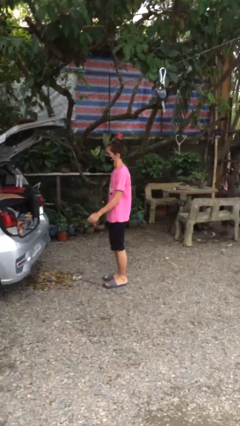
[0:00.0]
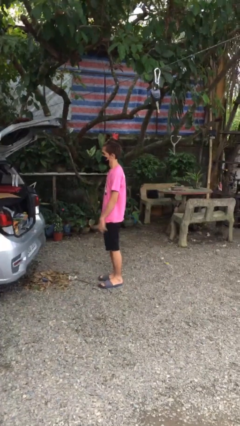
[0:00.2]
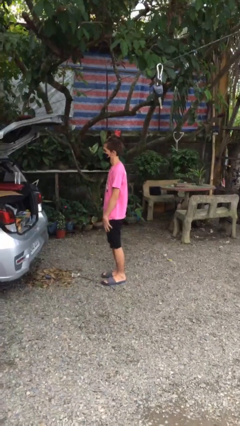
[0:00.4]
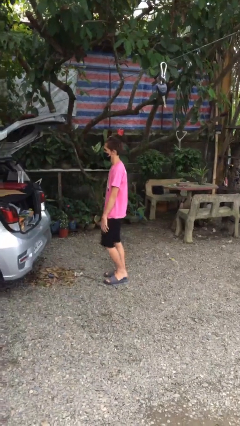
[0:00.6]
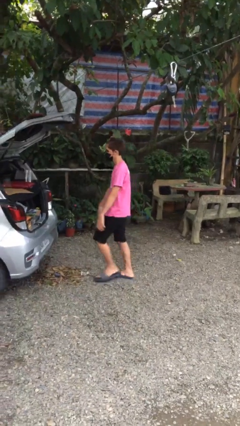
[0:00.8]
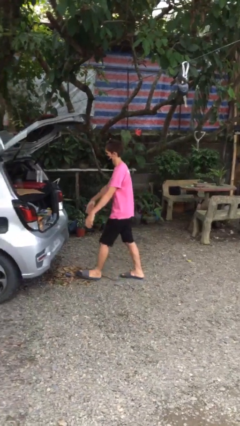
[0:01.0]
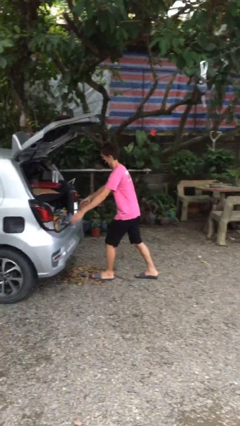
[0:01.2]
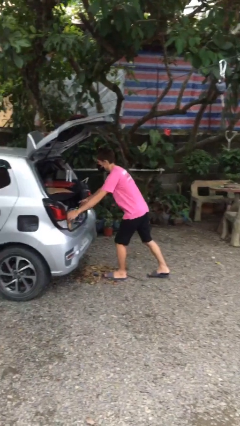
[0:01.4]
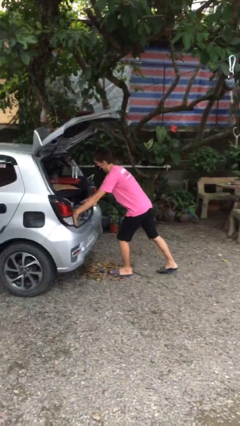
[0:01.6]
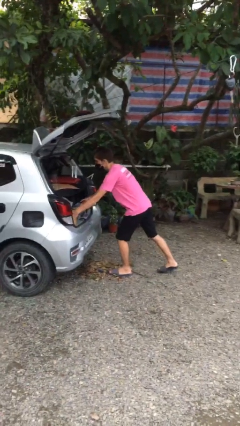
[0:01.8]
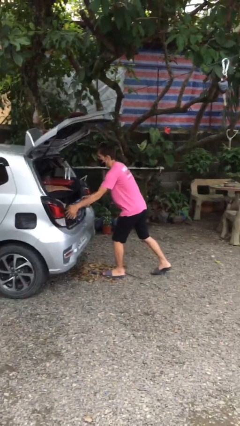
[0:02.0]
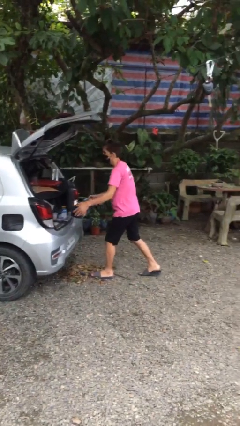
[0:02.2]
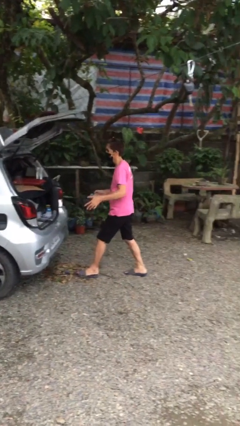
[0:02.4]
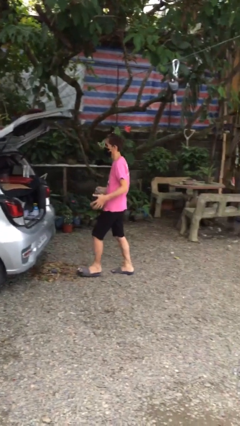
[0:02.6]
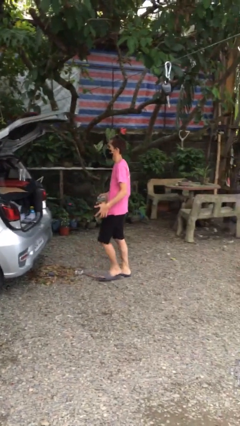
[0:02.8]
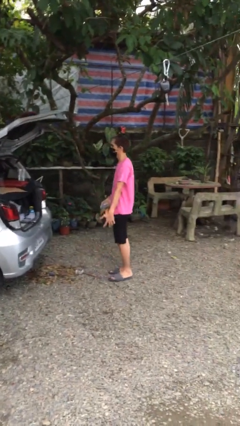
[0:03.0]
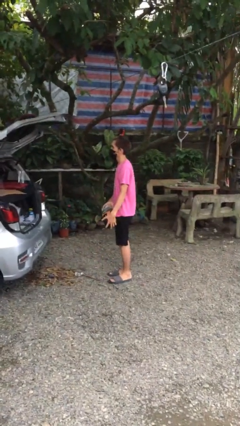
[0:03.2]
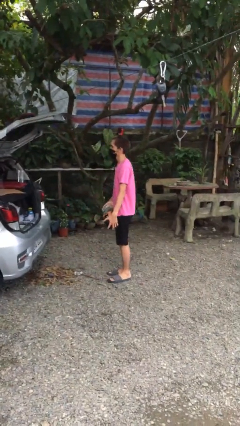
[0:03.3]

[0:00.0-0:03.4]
person unloads car

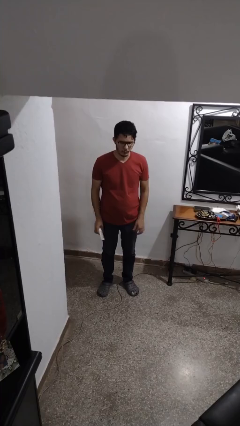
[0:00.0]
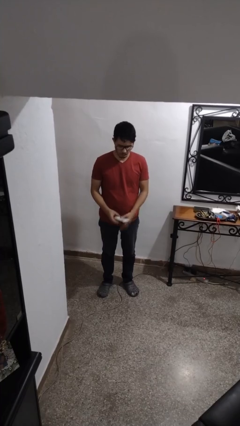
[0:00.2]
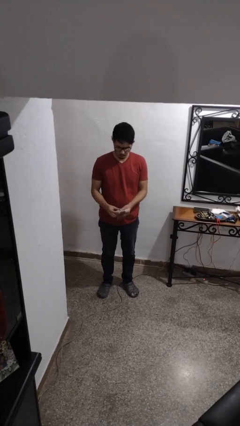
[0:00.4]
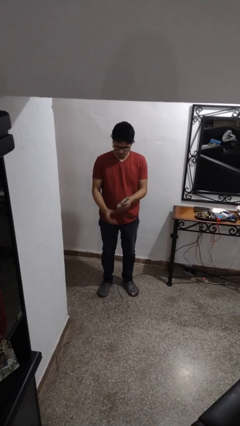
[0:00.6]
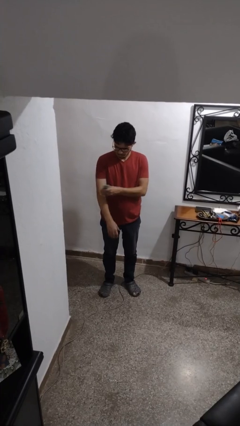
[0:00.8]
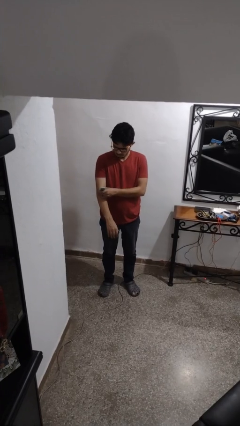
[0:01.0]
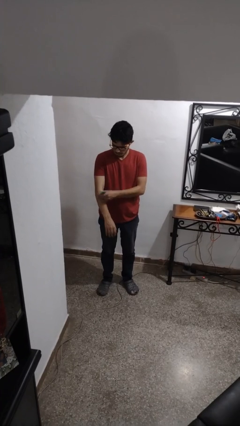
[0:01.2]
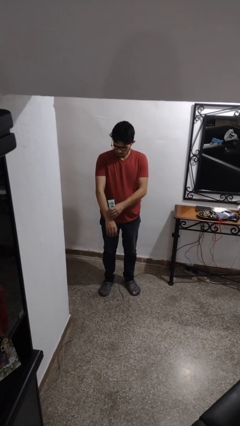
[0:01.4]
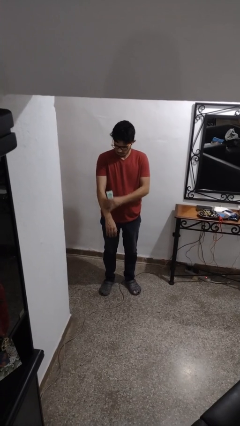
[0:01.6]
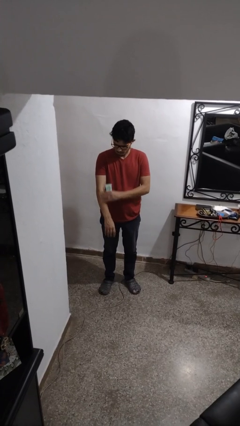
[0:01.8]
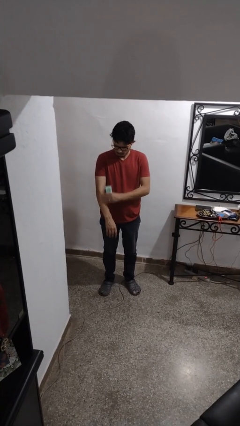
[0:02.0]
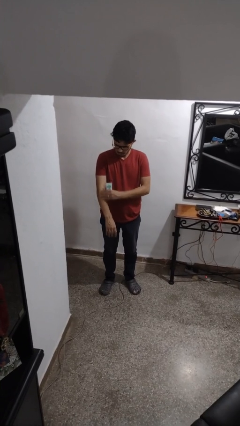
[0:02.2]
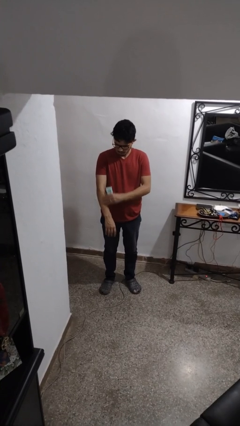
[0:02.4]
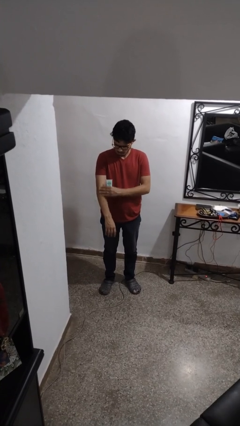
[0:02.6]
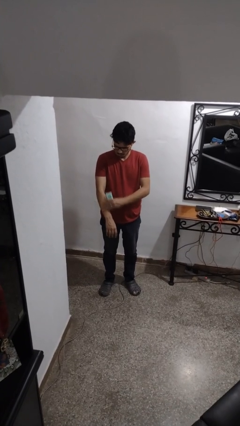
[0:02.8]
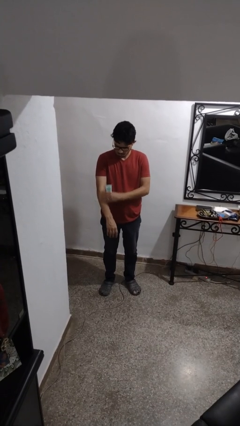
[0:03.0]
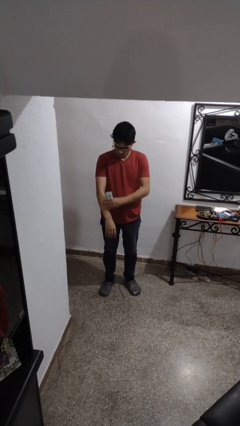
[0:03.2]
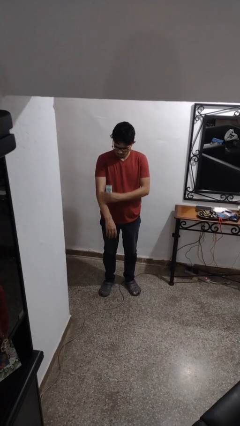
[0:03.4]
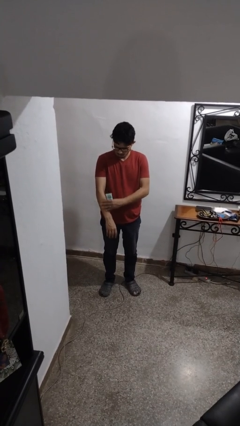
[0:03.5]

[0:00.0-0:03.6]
person applies sunscreen

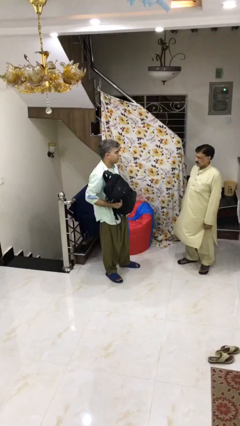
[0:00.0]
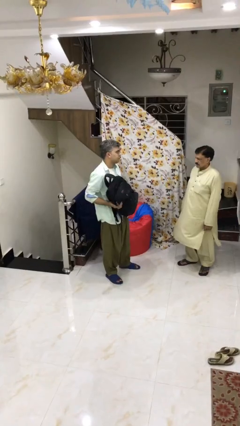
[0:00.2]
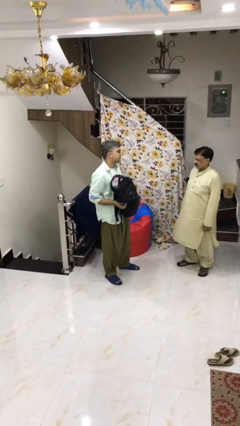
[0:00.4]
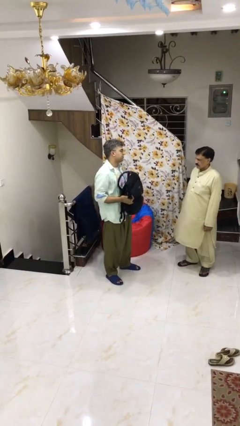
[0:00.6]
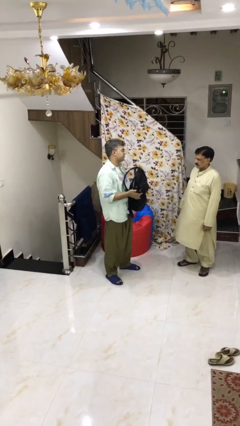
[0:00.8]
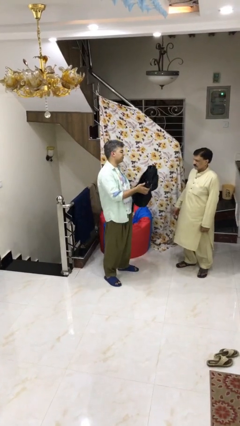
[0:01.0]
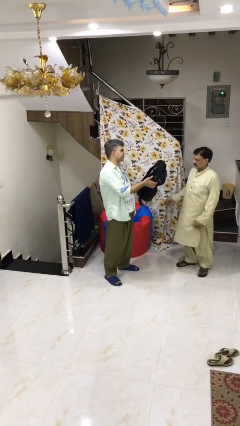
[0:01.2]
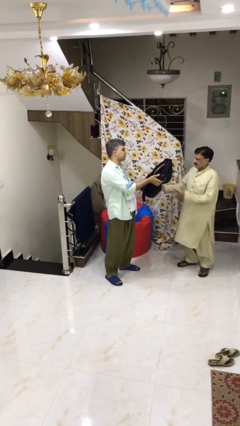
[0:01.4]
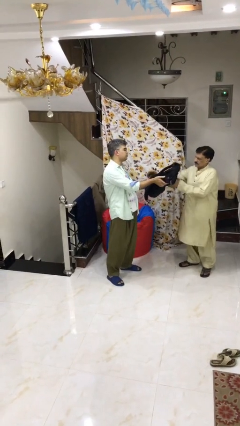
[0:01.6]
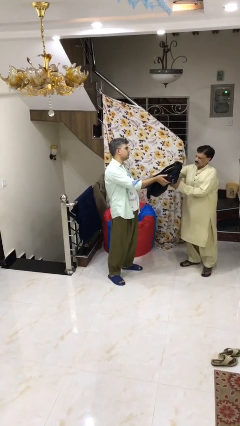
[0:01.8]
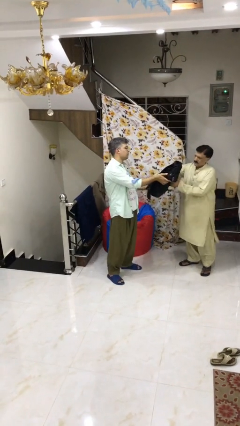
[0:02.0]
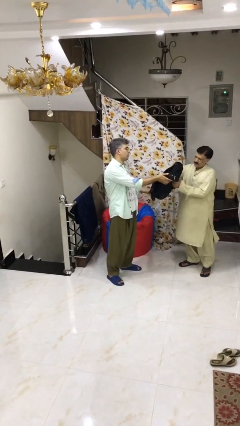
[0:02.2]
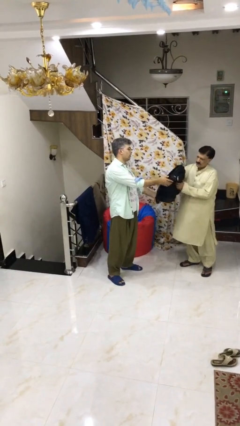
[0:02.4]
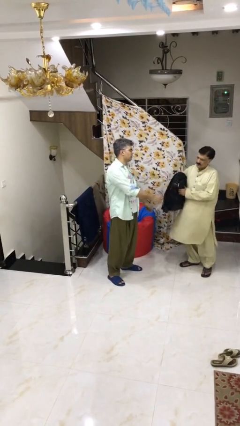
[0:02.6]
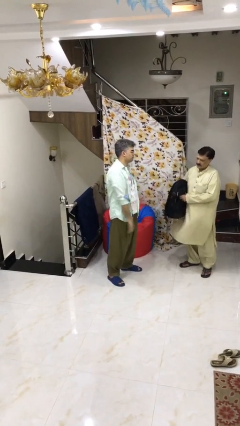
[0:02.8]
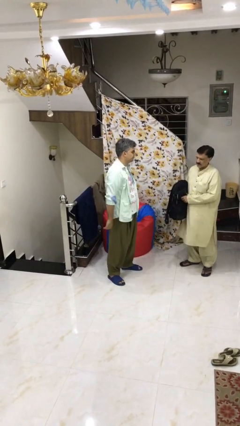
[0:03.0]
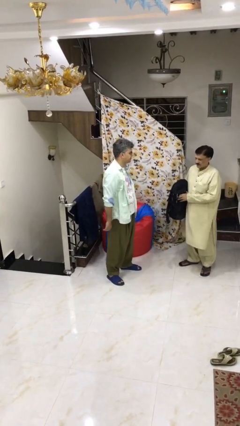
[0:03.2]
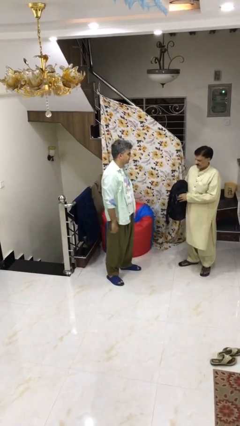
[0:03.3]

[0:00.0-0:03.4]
person transfers object to person

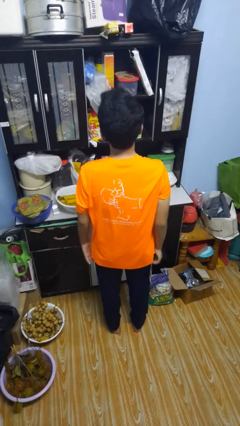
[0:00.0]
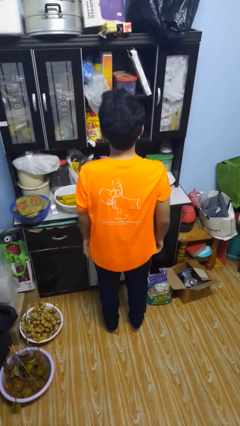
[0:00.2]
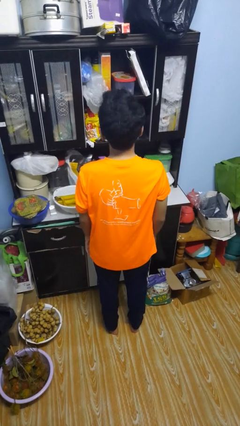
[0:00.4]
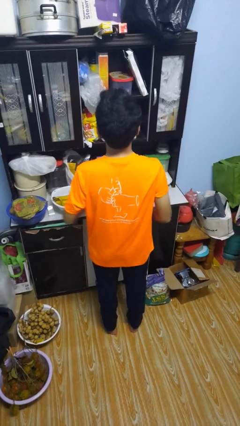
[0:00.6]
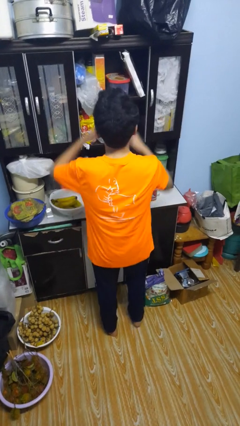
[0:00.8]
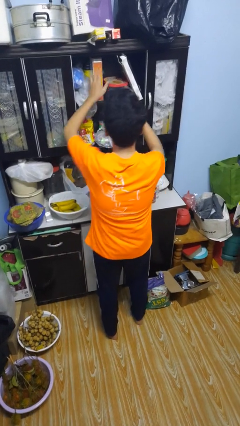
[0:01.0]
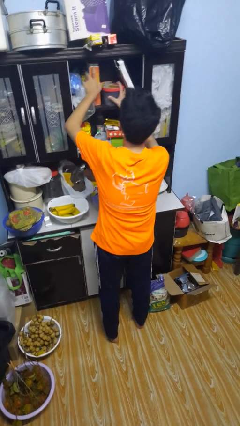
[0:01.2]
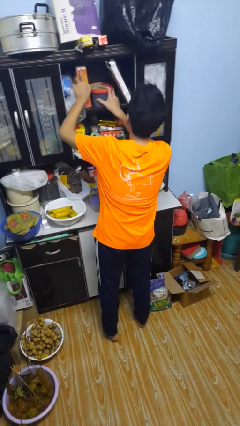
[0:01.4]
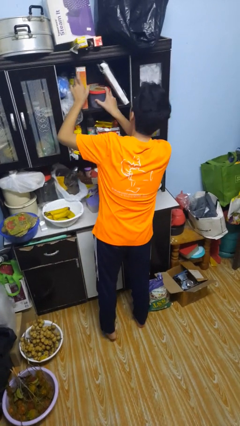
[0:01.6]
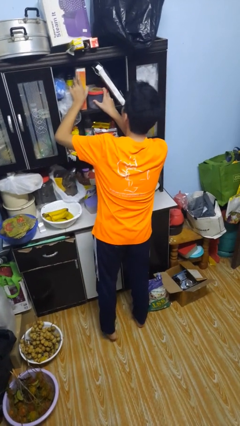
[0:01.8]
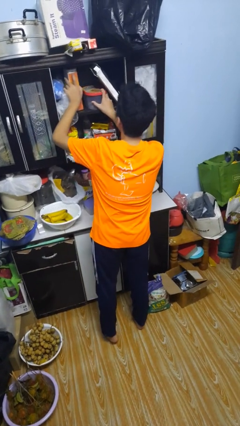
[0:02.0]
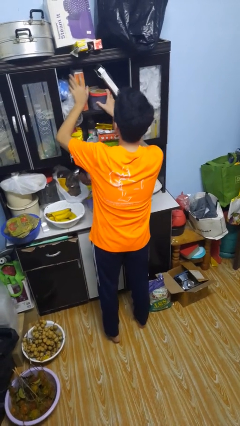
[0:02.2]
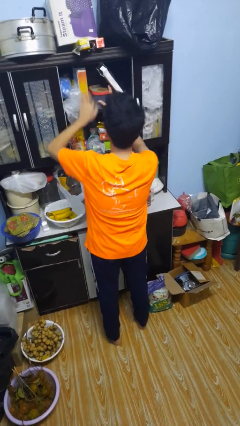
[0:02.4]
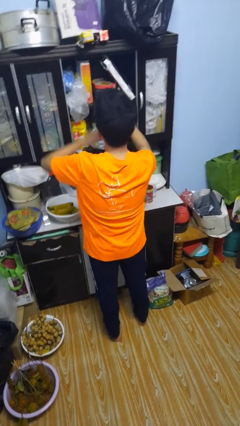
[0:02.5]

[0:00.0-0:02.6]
person searches in cabinet

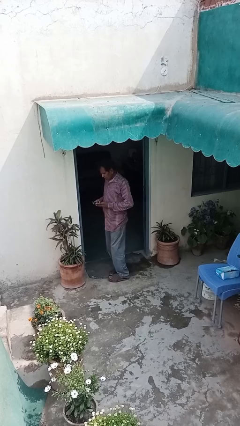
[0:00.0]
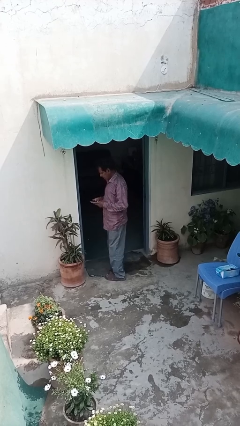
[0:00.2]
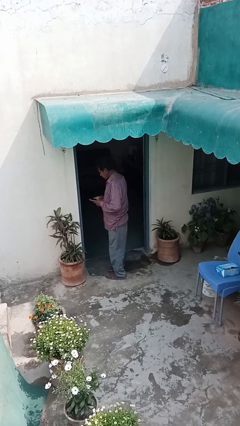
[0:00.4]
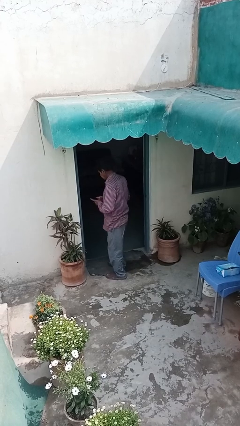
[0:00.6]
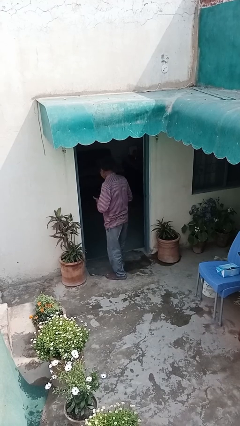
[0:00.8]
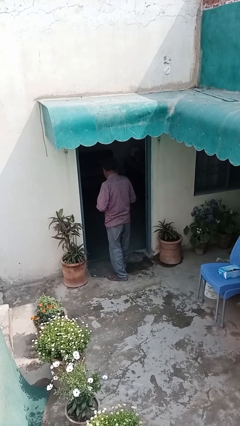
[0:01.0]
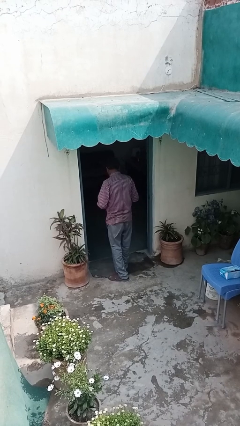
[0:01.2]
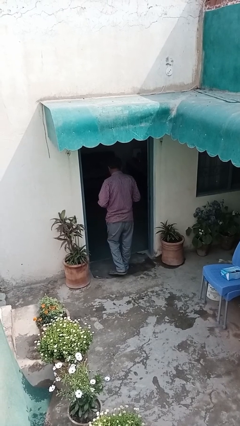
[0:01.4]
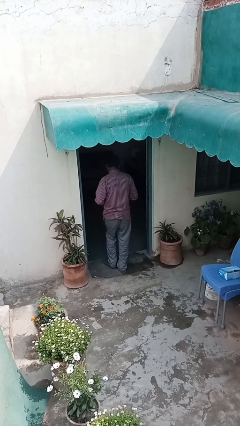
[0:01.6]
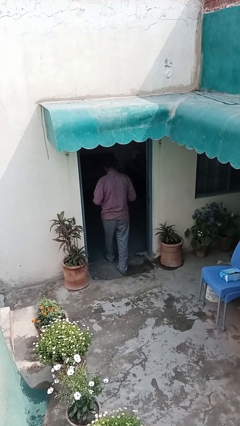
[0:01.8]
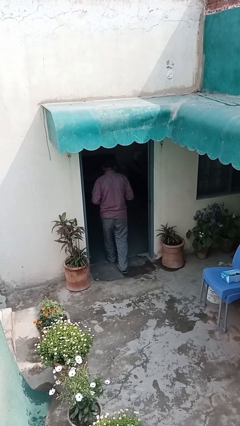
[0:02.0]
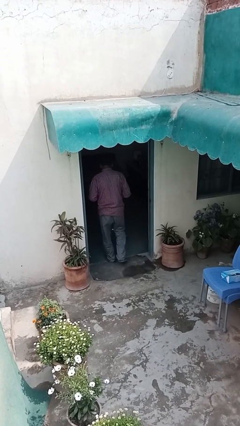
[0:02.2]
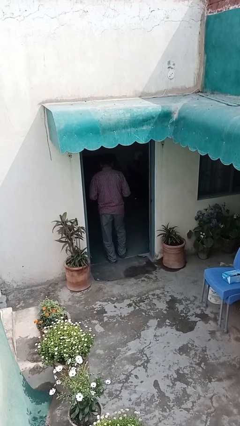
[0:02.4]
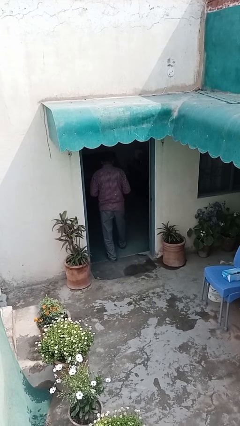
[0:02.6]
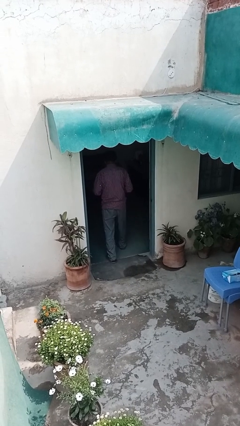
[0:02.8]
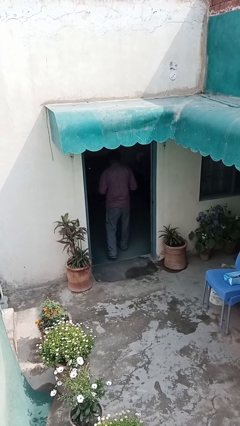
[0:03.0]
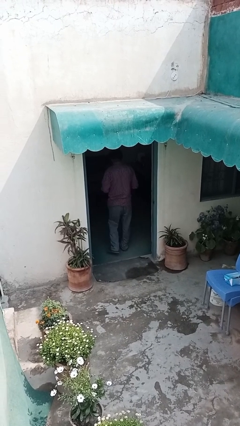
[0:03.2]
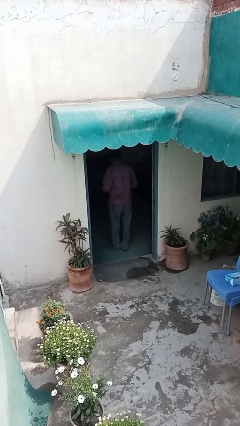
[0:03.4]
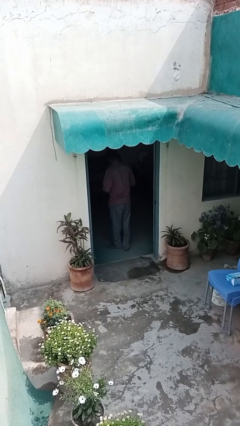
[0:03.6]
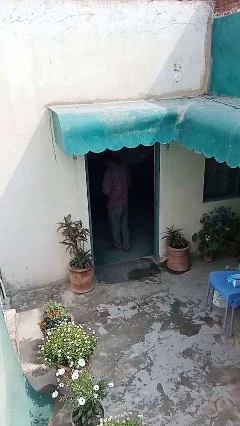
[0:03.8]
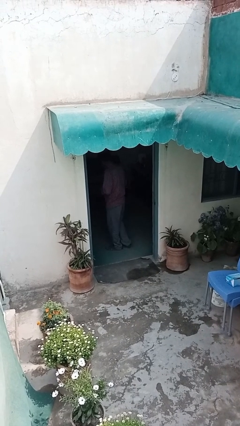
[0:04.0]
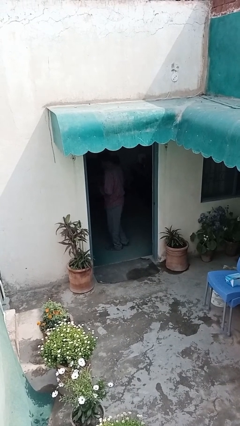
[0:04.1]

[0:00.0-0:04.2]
person exits scene through structure

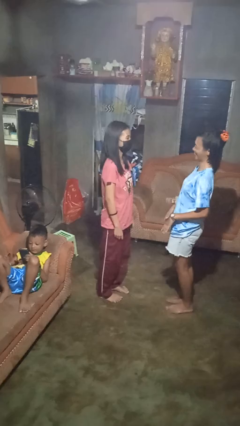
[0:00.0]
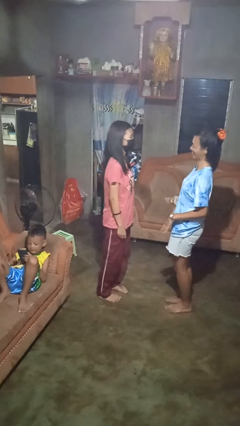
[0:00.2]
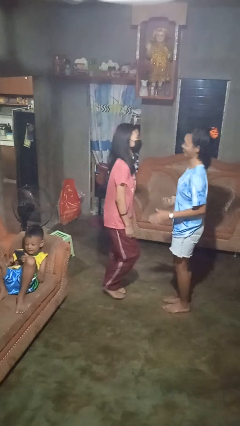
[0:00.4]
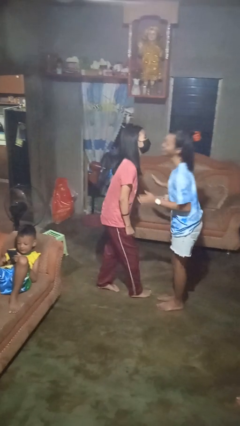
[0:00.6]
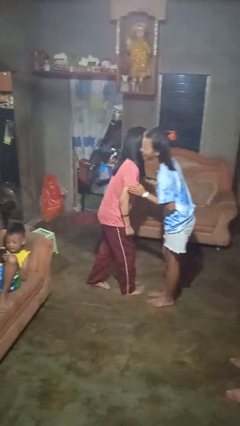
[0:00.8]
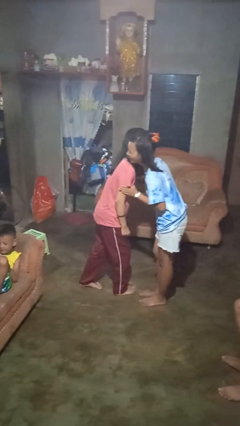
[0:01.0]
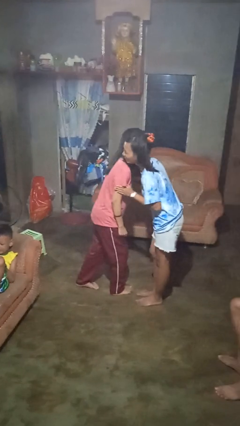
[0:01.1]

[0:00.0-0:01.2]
person kisses cheek of person
